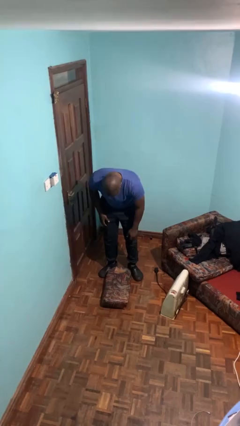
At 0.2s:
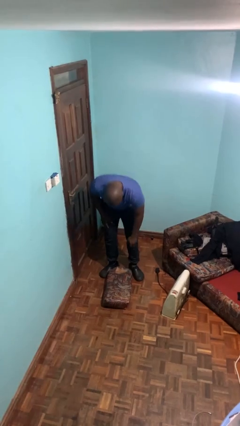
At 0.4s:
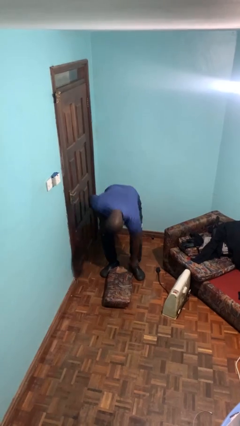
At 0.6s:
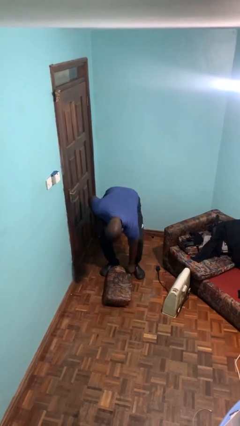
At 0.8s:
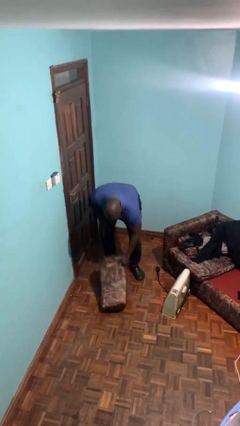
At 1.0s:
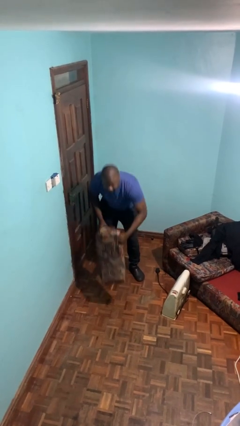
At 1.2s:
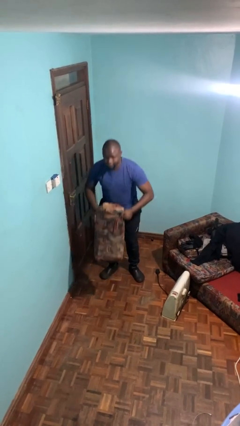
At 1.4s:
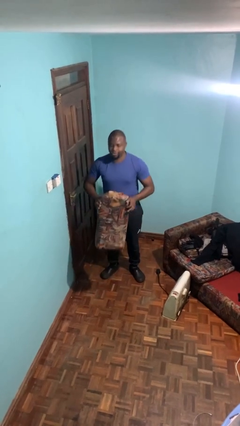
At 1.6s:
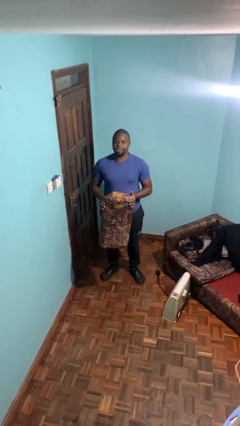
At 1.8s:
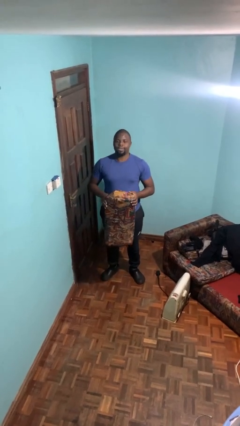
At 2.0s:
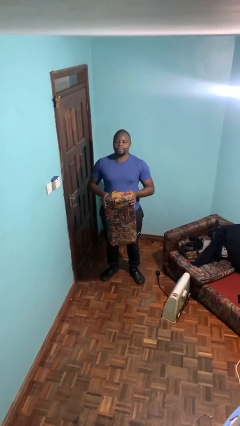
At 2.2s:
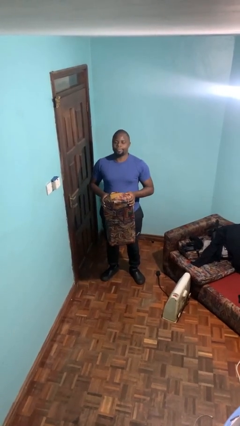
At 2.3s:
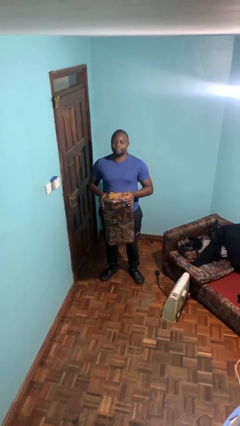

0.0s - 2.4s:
person picks up object from floor

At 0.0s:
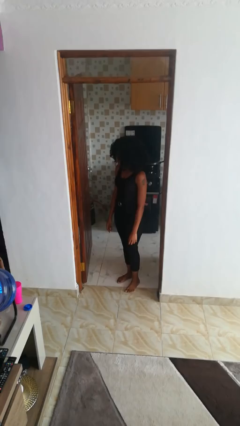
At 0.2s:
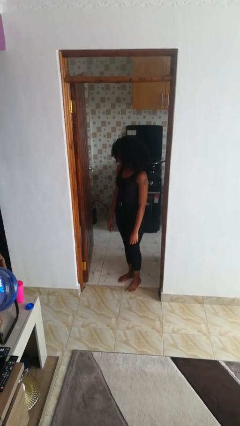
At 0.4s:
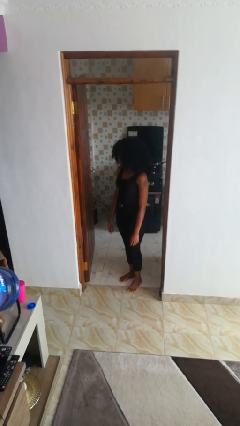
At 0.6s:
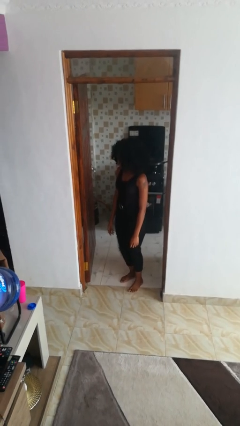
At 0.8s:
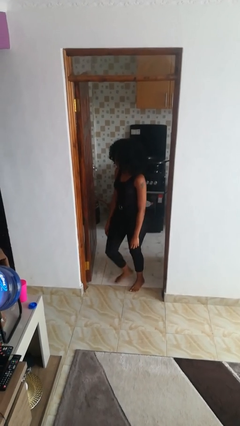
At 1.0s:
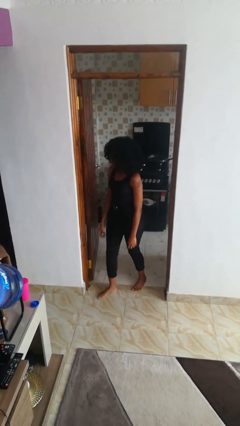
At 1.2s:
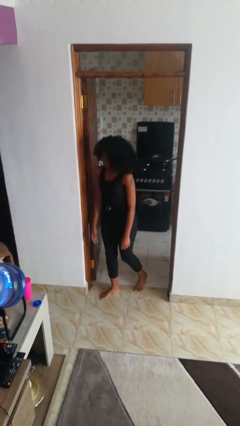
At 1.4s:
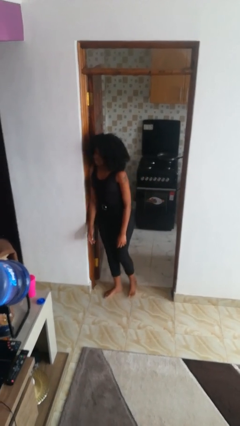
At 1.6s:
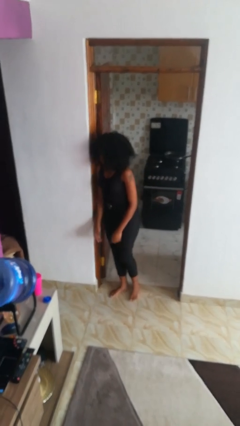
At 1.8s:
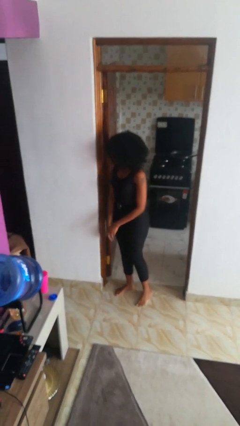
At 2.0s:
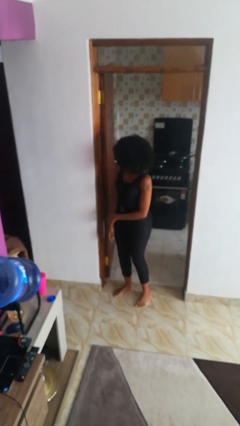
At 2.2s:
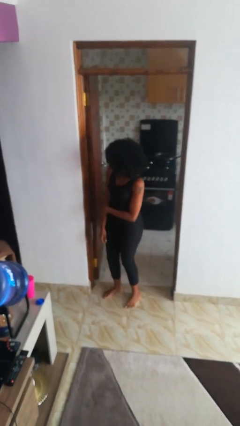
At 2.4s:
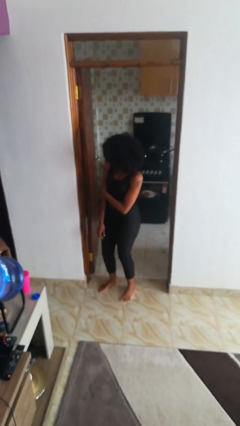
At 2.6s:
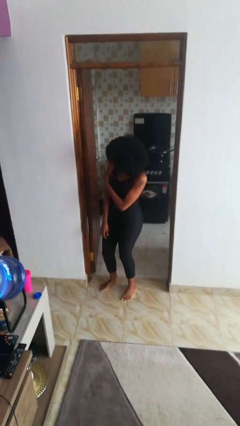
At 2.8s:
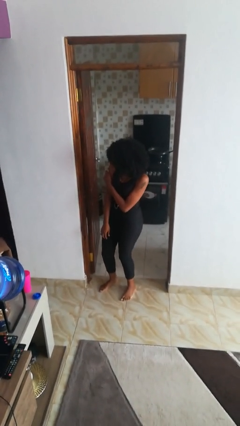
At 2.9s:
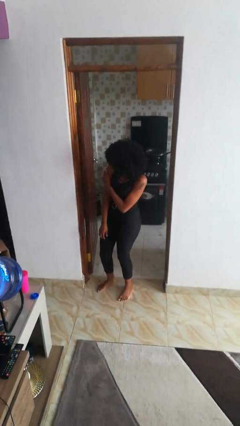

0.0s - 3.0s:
person bumps into wall

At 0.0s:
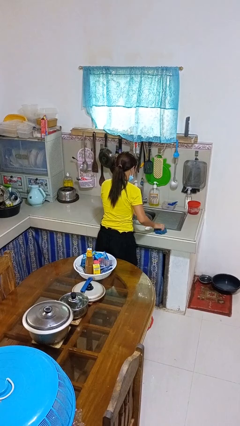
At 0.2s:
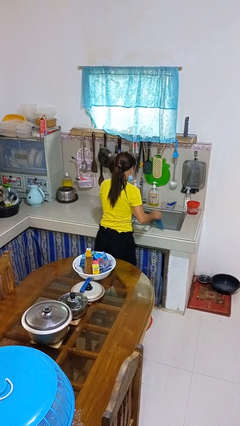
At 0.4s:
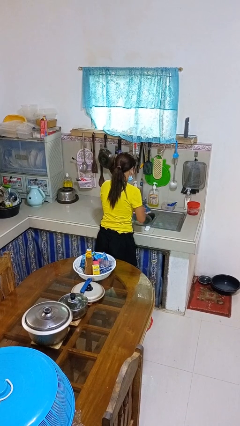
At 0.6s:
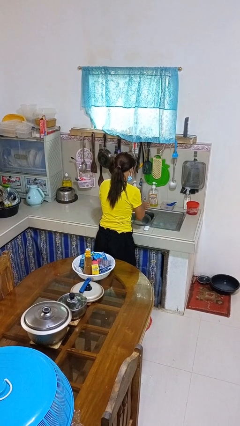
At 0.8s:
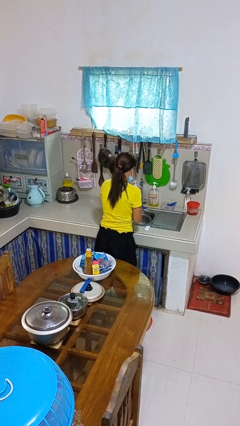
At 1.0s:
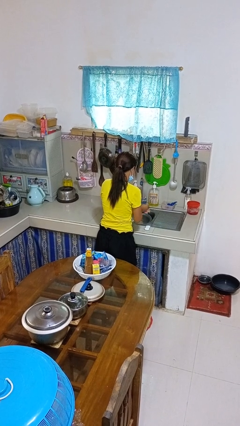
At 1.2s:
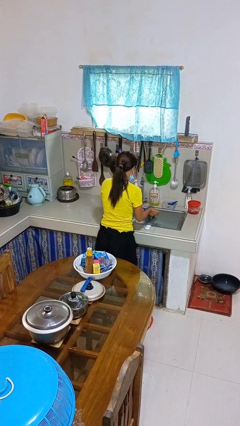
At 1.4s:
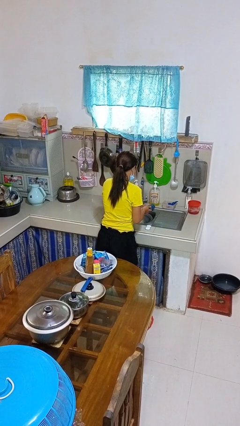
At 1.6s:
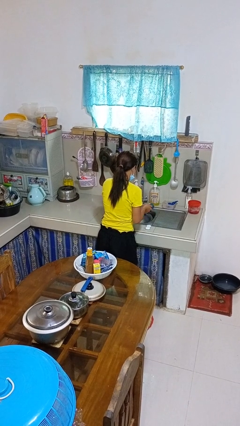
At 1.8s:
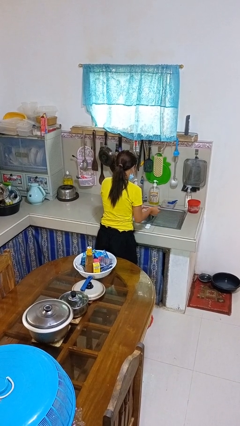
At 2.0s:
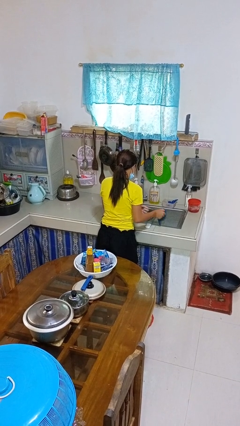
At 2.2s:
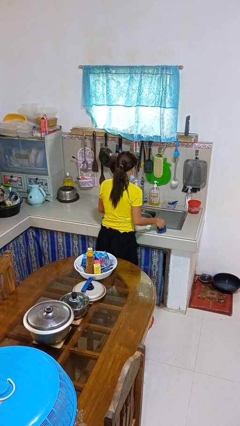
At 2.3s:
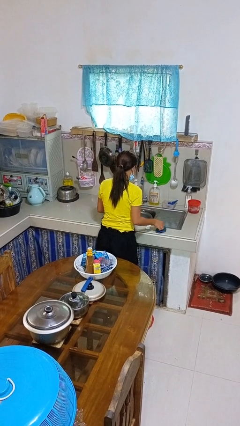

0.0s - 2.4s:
person dries hands with towel

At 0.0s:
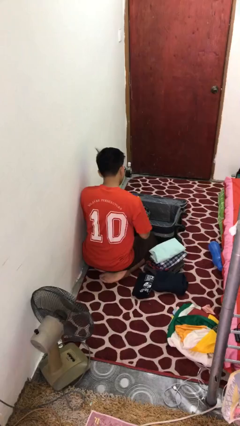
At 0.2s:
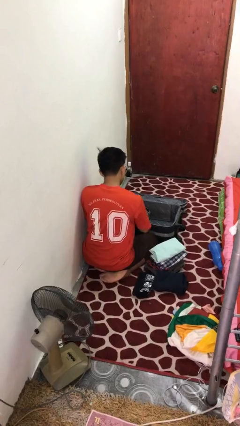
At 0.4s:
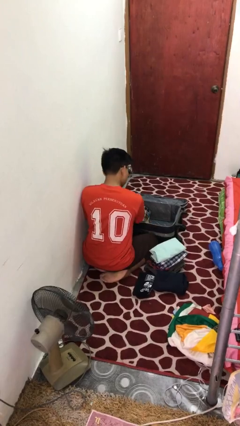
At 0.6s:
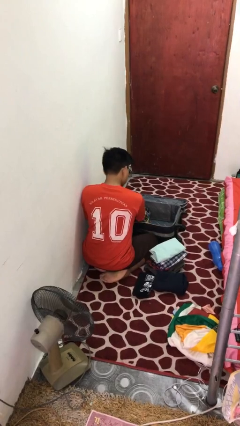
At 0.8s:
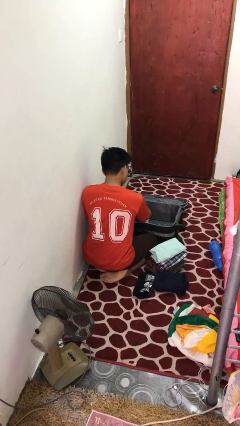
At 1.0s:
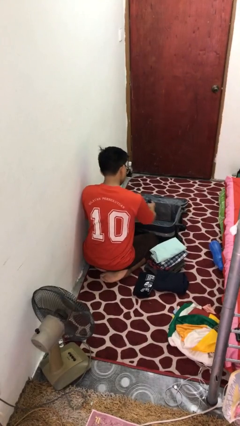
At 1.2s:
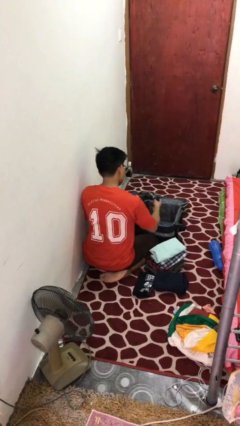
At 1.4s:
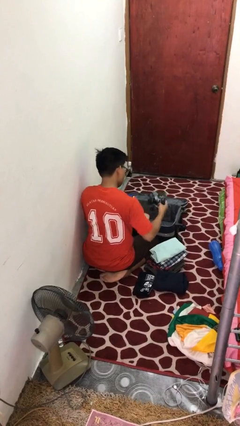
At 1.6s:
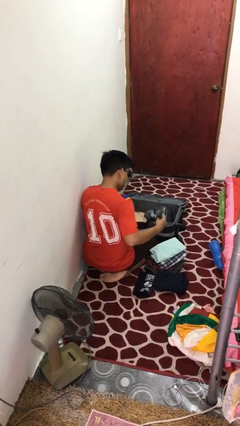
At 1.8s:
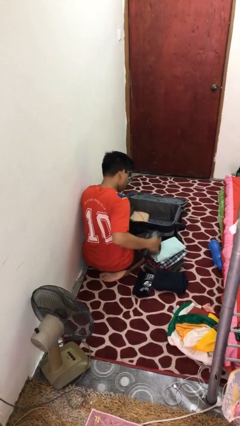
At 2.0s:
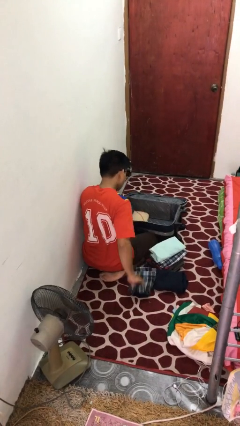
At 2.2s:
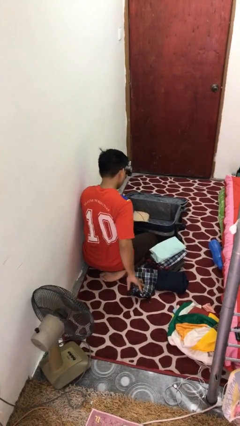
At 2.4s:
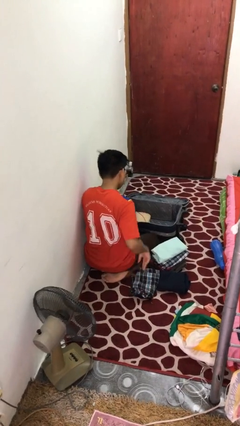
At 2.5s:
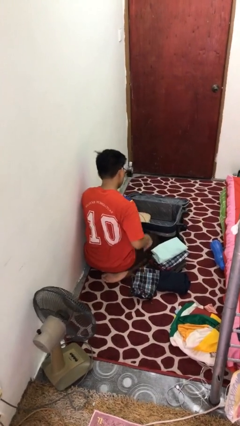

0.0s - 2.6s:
person unloads clothes from suitcase

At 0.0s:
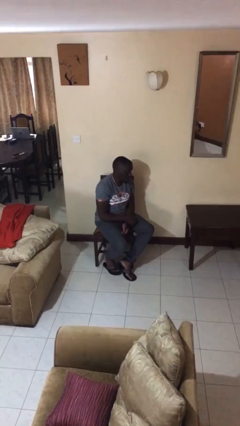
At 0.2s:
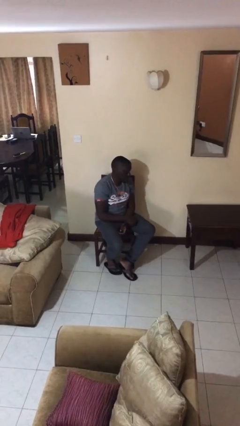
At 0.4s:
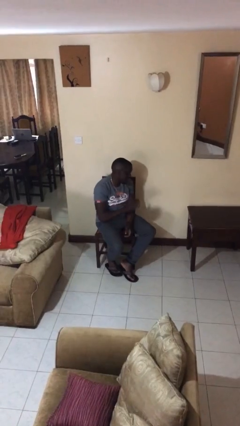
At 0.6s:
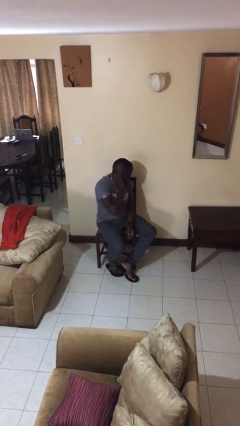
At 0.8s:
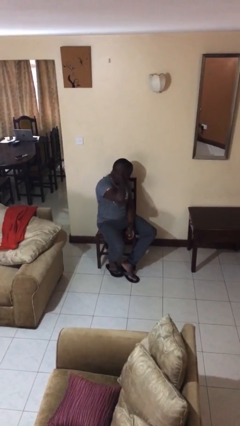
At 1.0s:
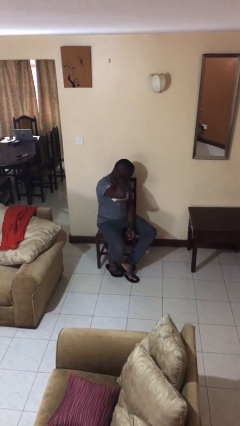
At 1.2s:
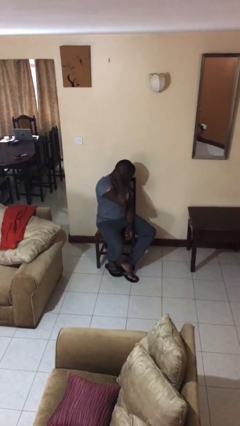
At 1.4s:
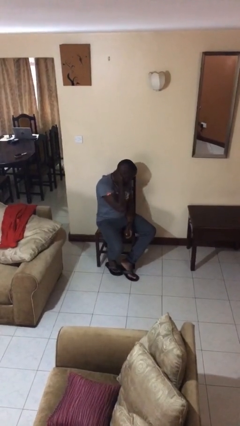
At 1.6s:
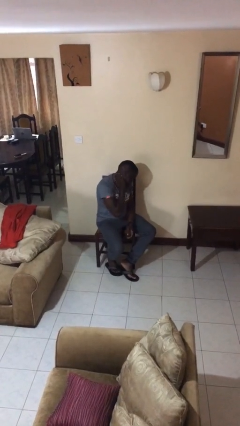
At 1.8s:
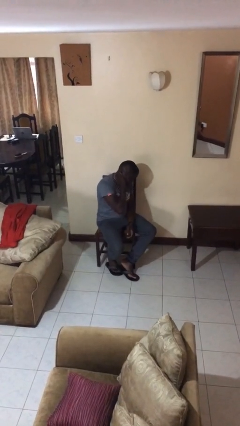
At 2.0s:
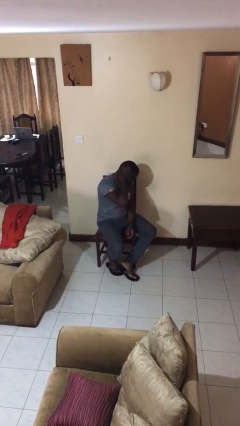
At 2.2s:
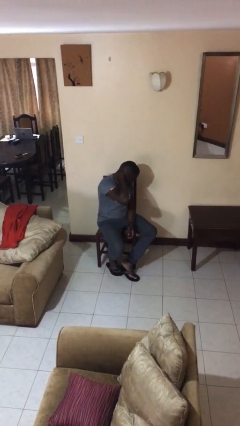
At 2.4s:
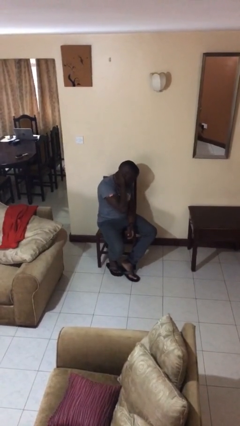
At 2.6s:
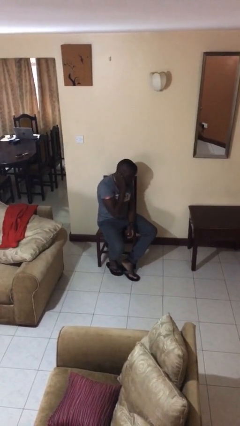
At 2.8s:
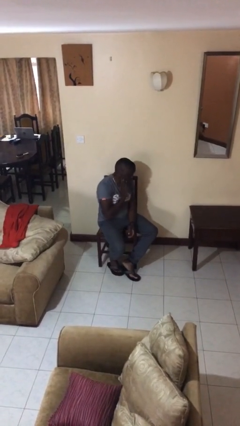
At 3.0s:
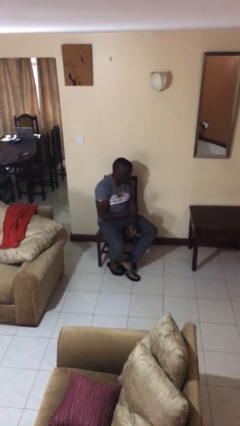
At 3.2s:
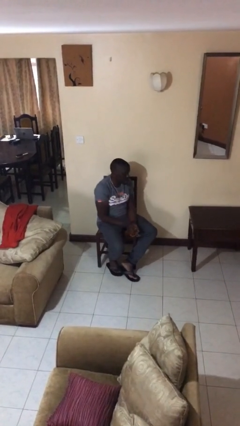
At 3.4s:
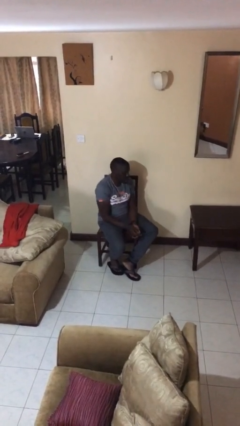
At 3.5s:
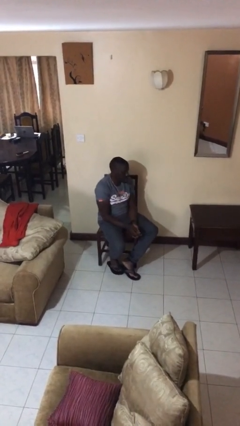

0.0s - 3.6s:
person rubs neck

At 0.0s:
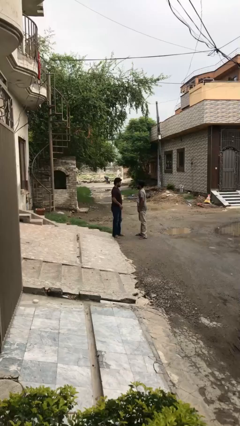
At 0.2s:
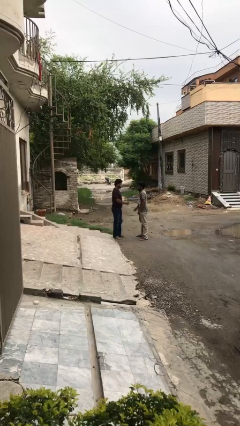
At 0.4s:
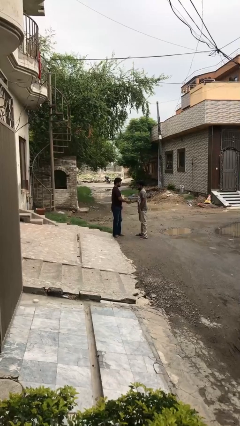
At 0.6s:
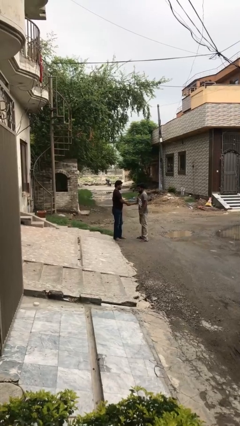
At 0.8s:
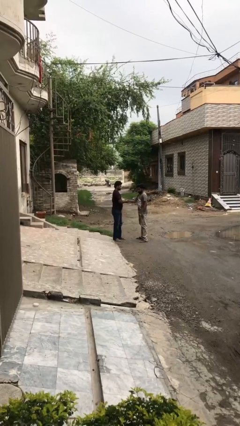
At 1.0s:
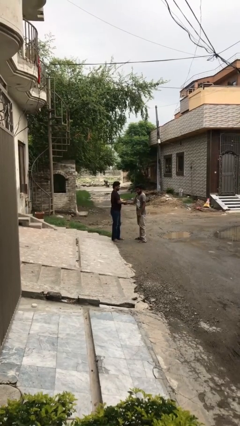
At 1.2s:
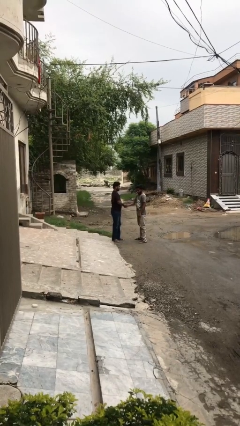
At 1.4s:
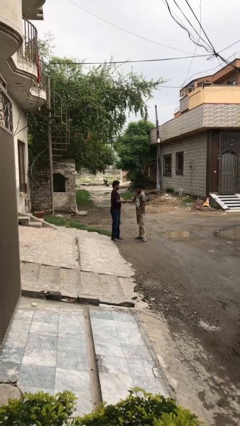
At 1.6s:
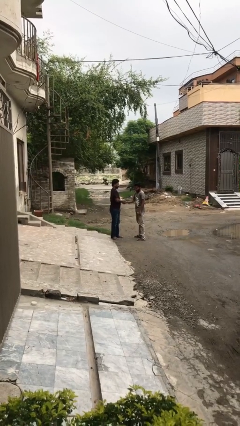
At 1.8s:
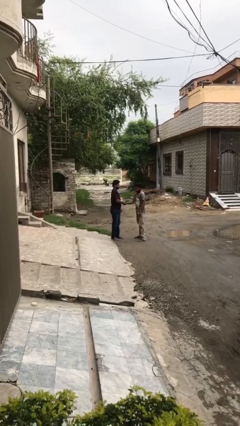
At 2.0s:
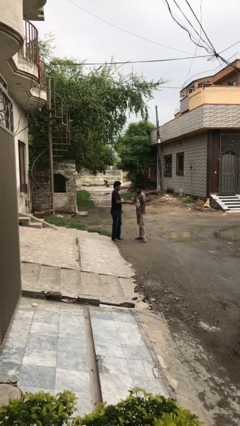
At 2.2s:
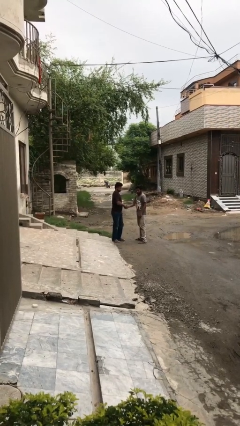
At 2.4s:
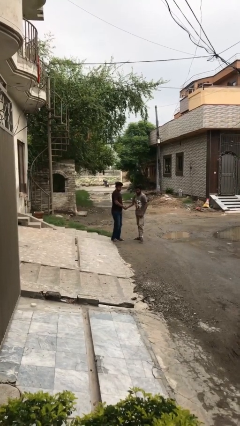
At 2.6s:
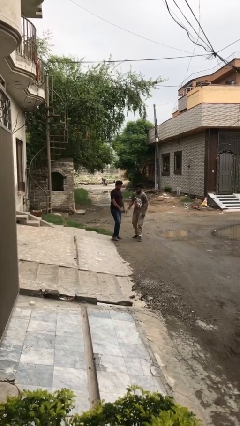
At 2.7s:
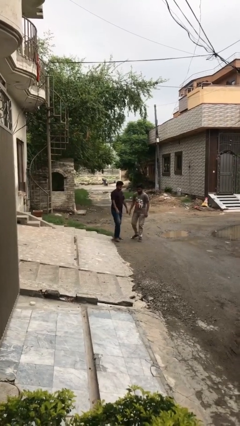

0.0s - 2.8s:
person shakes hand

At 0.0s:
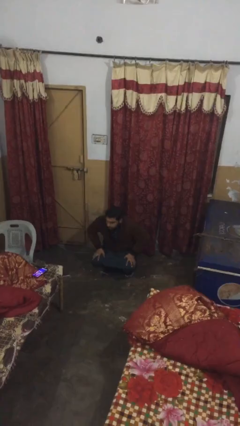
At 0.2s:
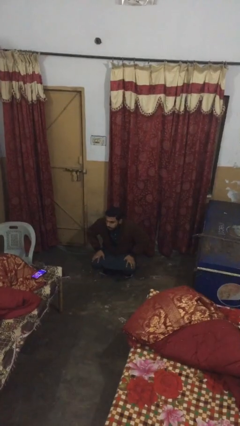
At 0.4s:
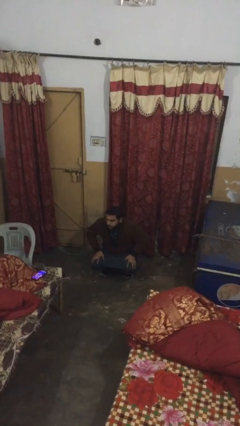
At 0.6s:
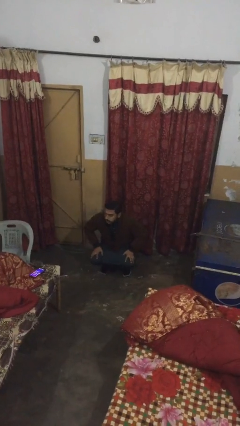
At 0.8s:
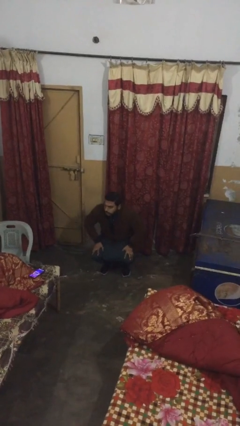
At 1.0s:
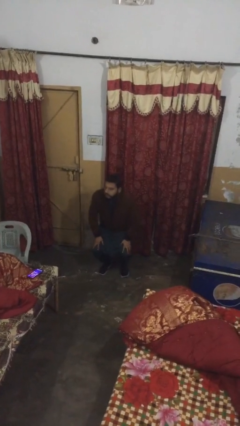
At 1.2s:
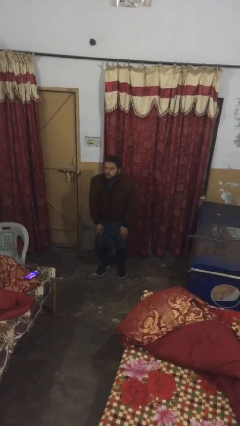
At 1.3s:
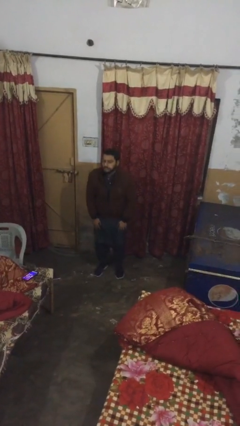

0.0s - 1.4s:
person stands up
